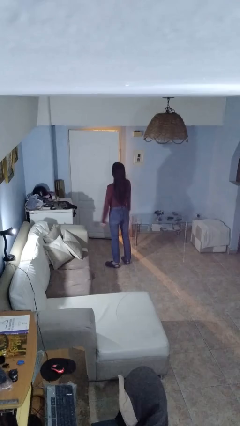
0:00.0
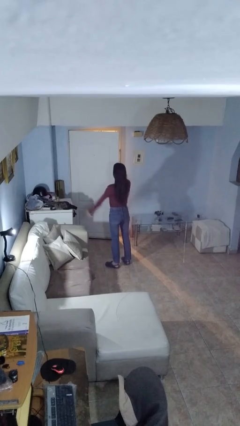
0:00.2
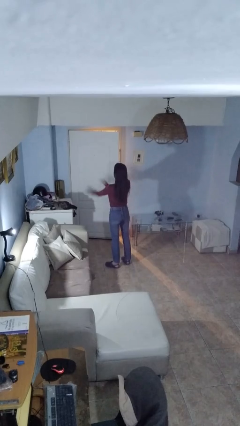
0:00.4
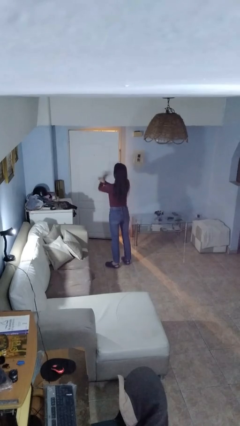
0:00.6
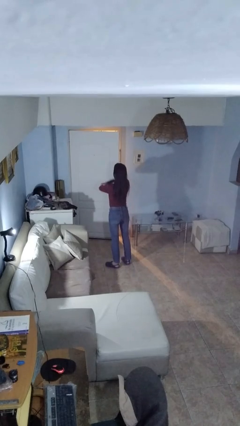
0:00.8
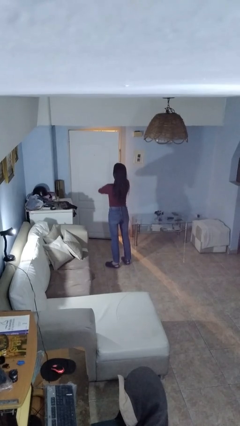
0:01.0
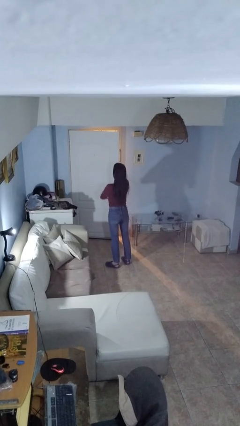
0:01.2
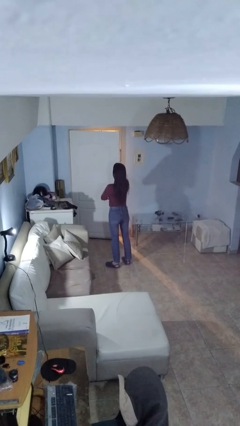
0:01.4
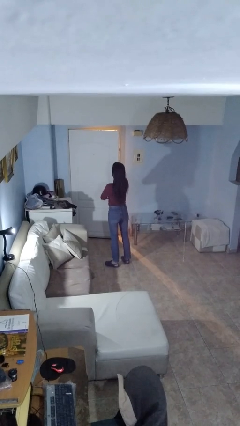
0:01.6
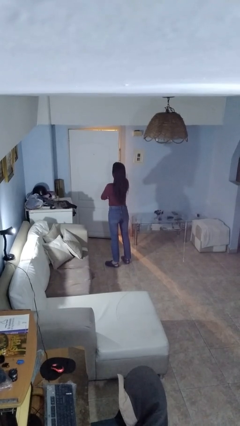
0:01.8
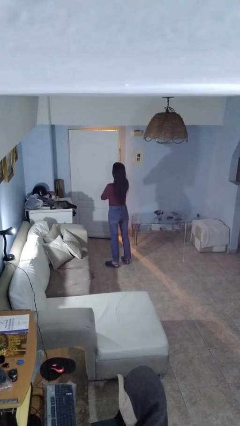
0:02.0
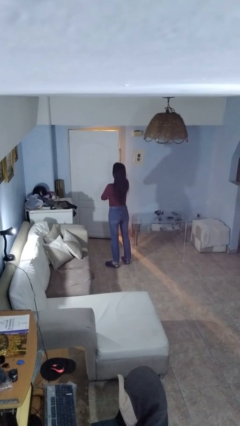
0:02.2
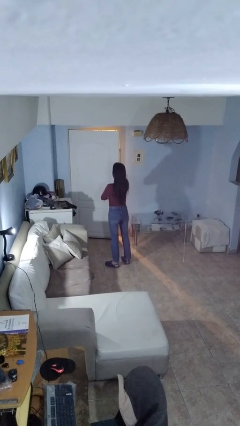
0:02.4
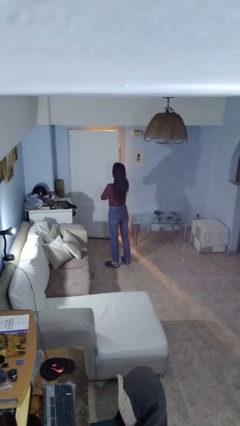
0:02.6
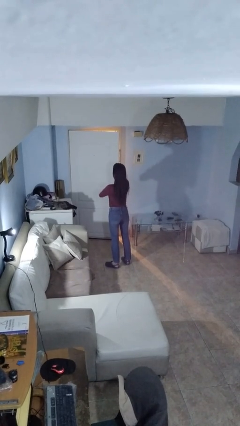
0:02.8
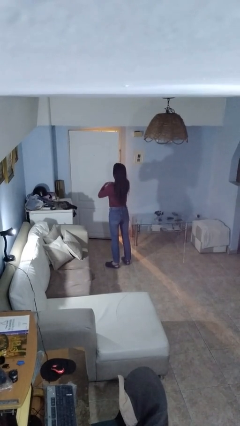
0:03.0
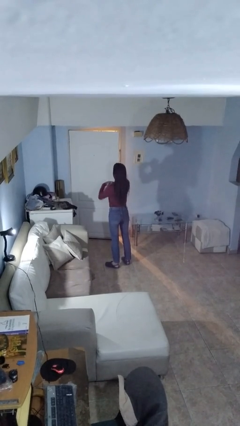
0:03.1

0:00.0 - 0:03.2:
person crosses arms

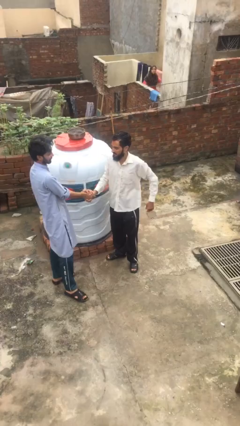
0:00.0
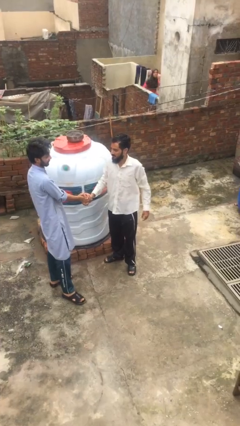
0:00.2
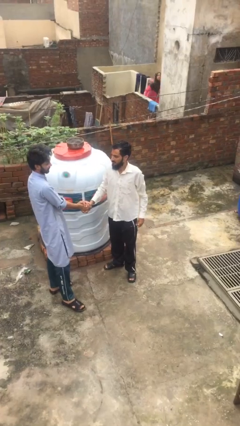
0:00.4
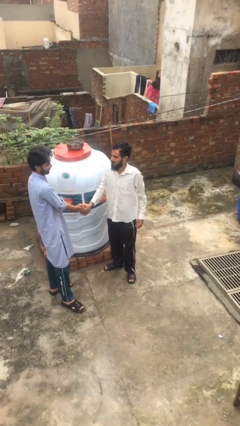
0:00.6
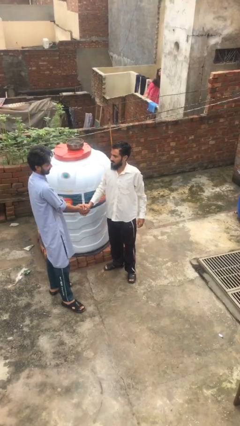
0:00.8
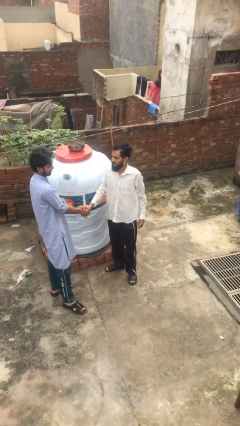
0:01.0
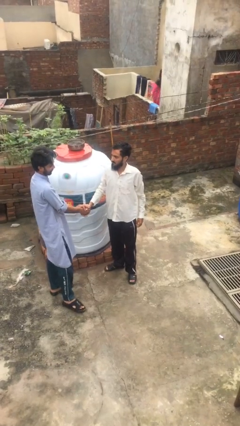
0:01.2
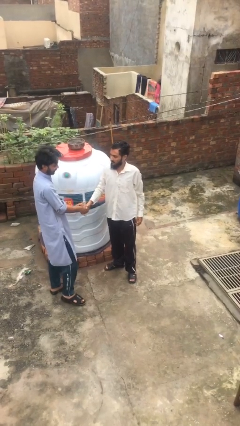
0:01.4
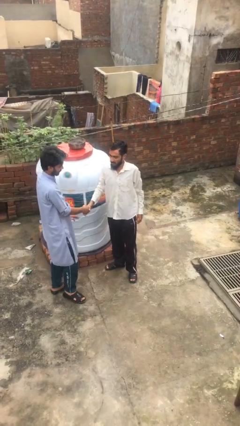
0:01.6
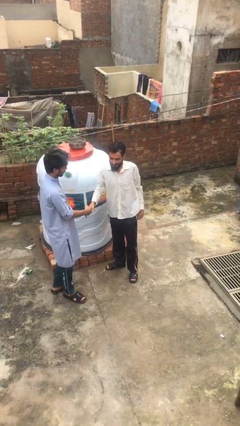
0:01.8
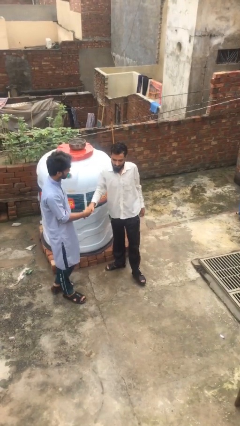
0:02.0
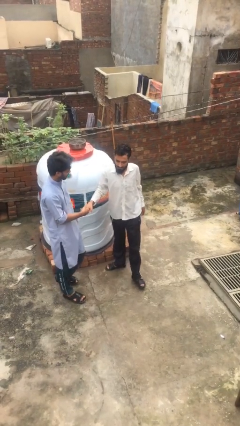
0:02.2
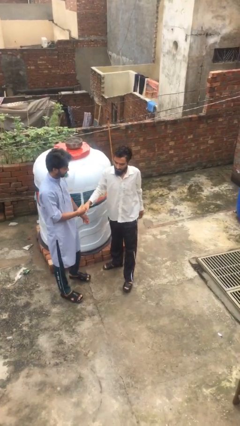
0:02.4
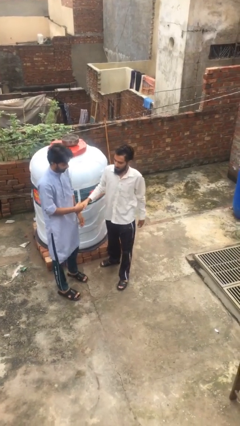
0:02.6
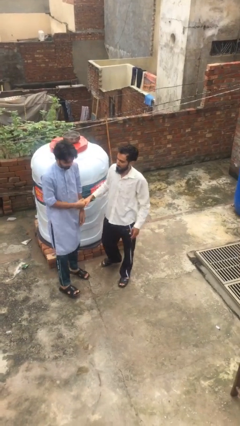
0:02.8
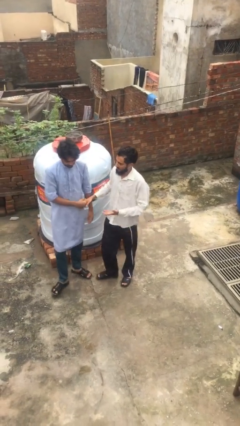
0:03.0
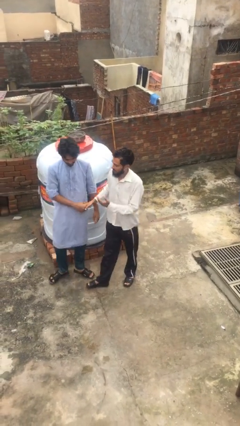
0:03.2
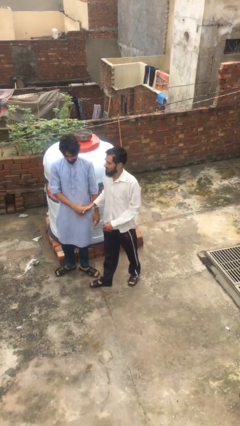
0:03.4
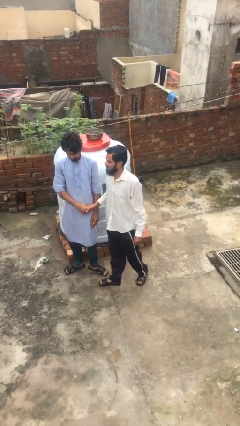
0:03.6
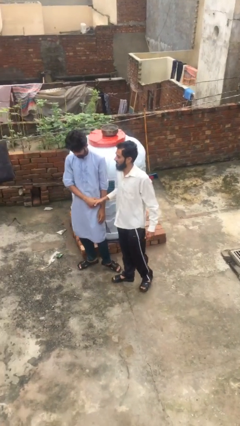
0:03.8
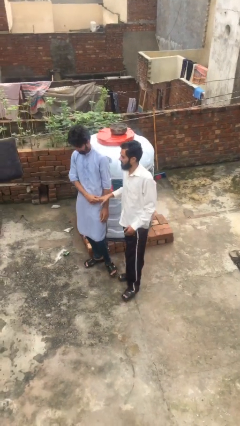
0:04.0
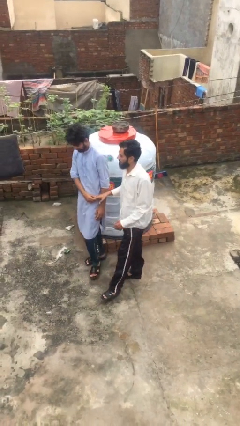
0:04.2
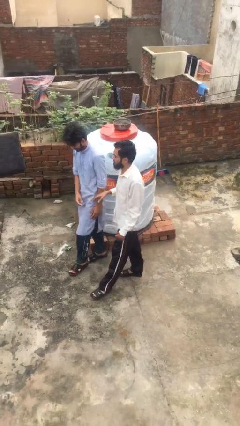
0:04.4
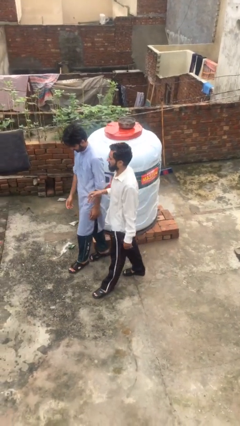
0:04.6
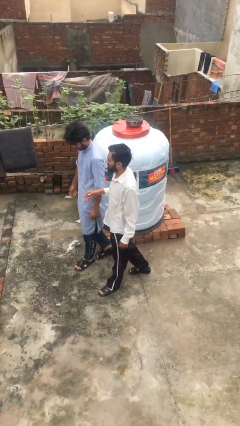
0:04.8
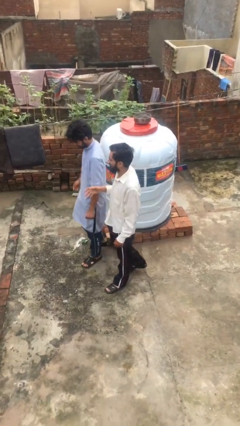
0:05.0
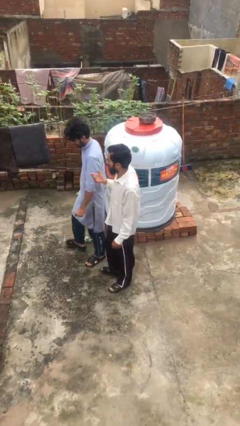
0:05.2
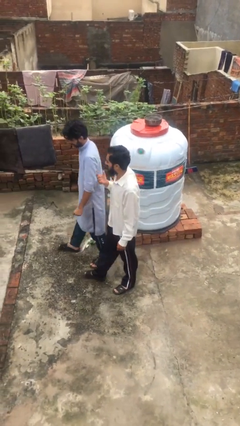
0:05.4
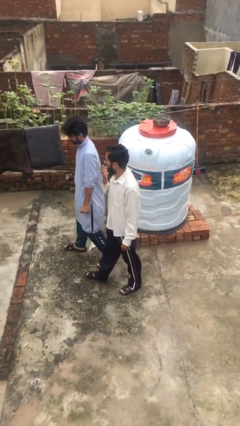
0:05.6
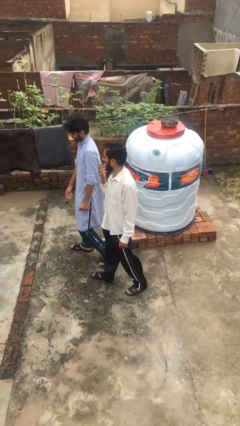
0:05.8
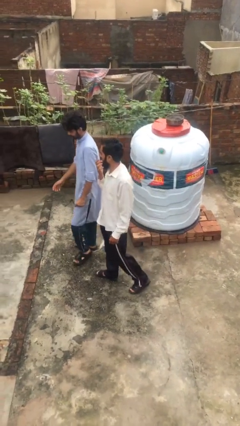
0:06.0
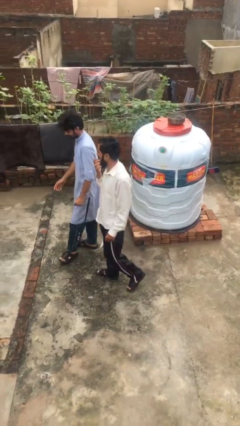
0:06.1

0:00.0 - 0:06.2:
person talks to person

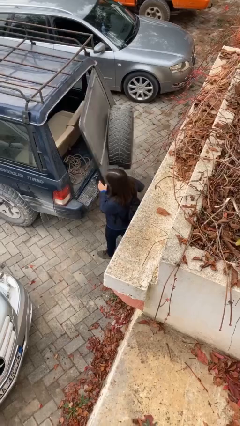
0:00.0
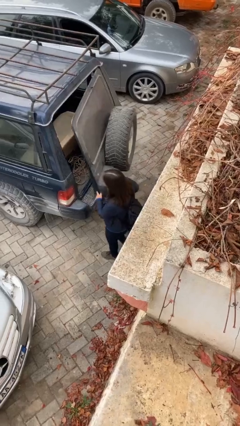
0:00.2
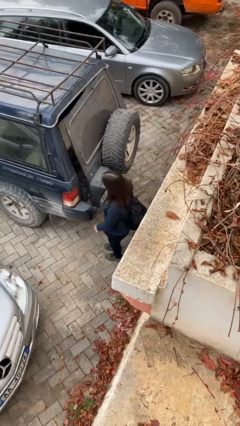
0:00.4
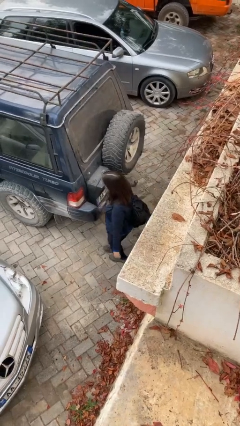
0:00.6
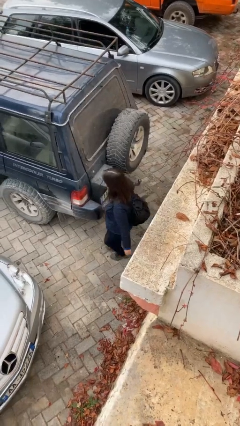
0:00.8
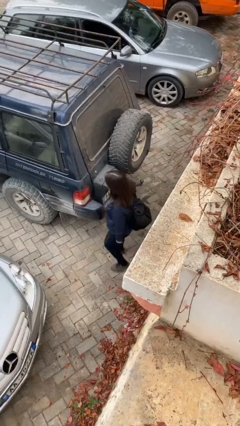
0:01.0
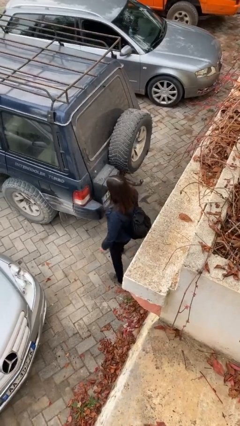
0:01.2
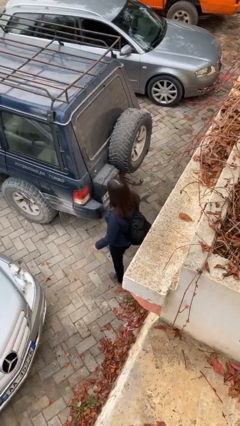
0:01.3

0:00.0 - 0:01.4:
person closes car trunk

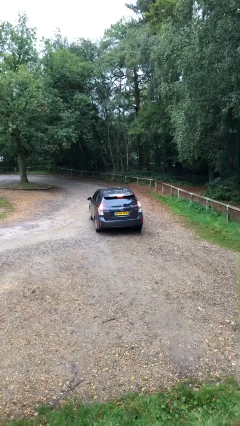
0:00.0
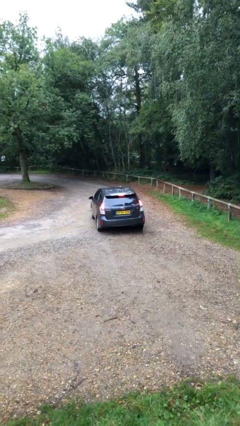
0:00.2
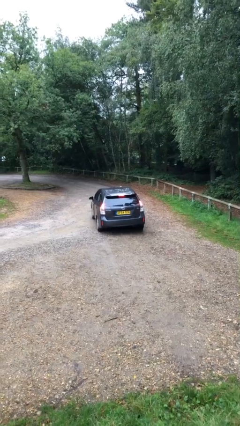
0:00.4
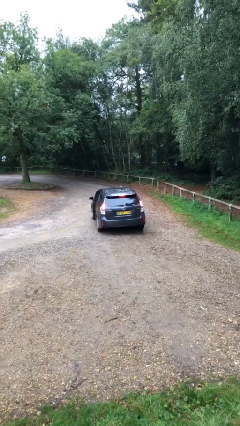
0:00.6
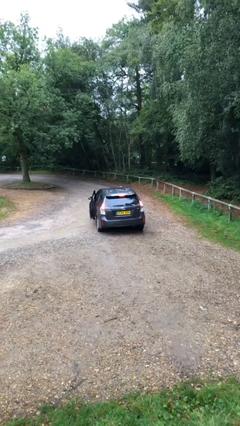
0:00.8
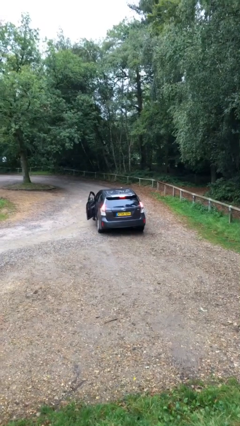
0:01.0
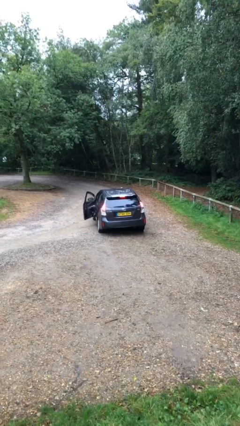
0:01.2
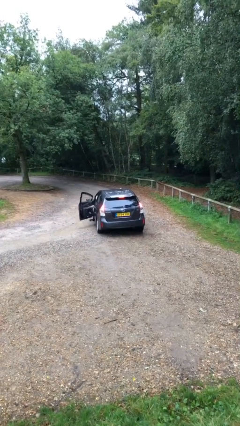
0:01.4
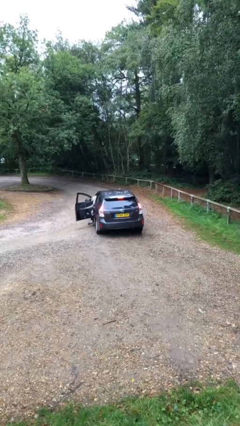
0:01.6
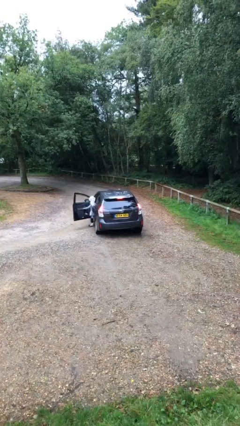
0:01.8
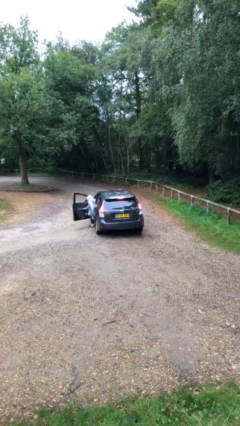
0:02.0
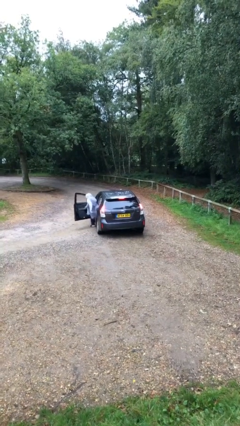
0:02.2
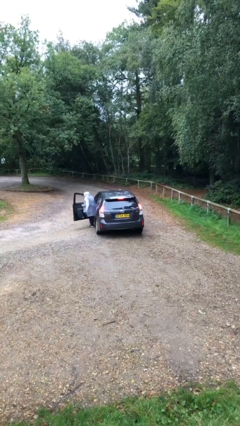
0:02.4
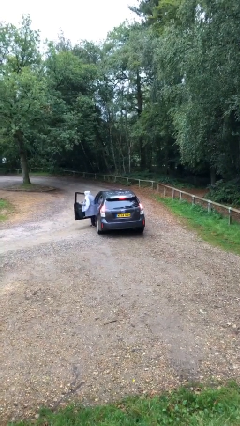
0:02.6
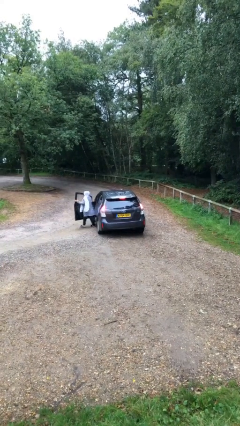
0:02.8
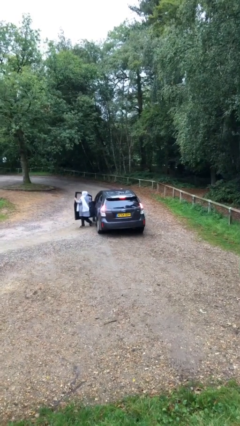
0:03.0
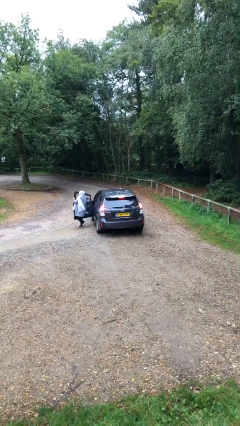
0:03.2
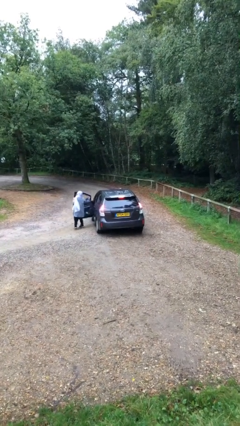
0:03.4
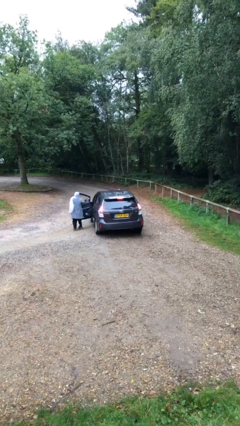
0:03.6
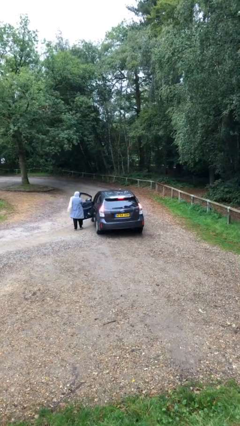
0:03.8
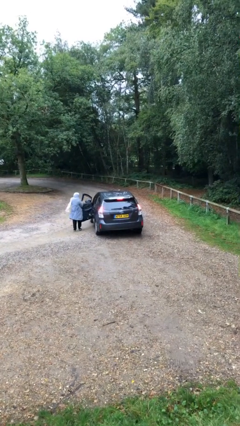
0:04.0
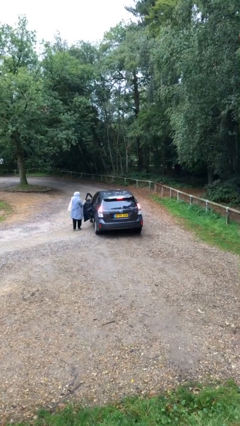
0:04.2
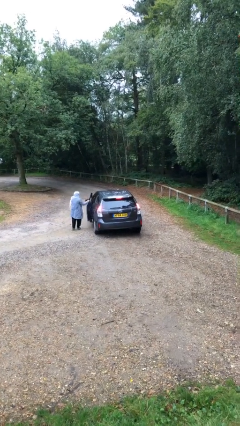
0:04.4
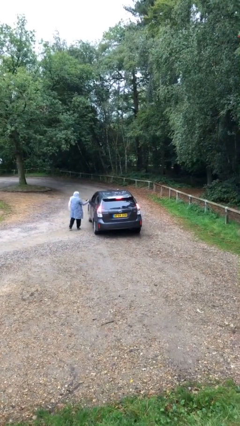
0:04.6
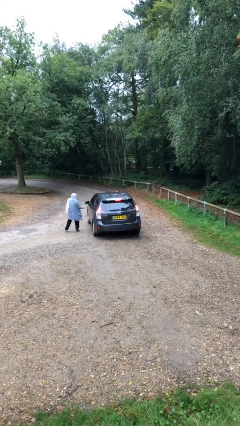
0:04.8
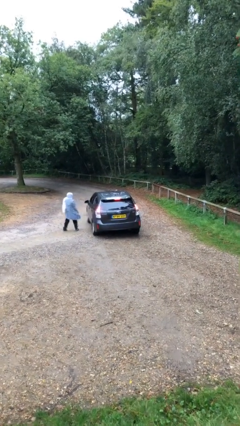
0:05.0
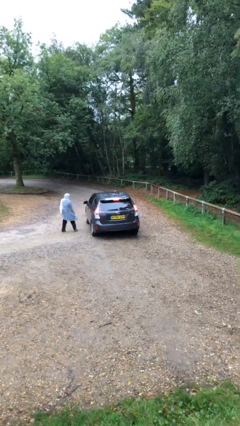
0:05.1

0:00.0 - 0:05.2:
car drops off person

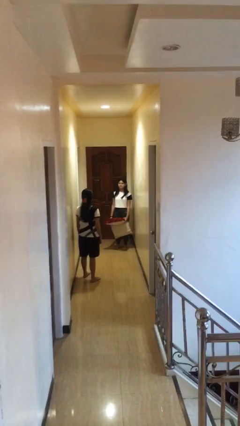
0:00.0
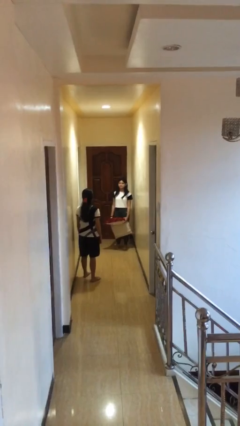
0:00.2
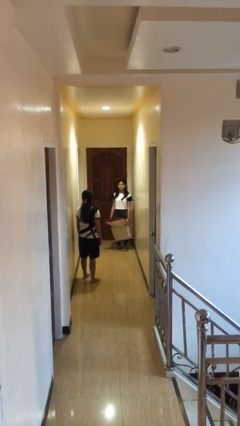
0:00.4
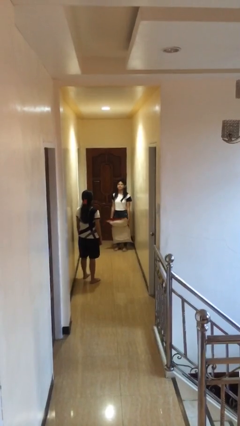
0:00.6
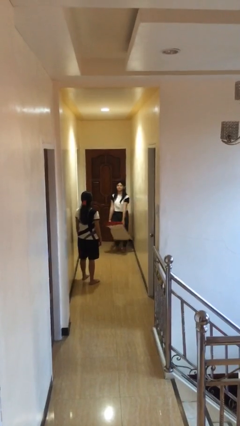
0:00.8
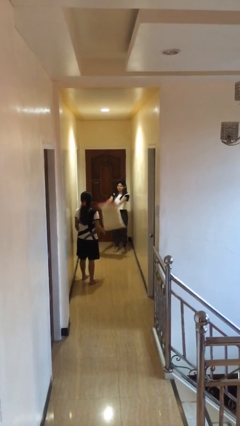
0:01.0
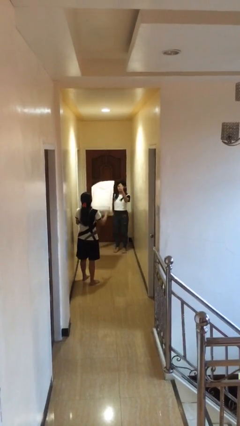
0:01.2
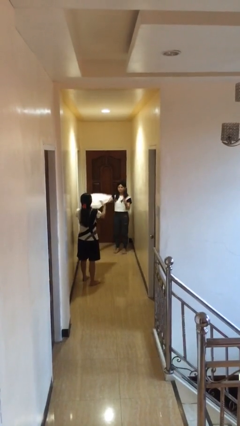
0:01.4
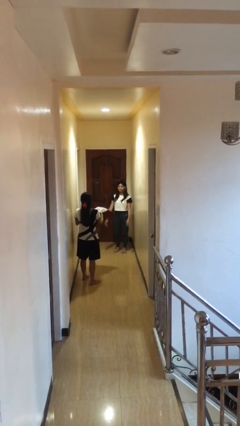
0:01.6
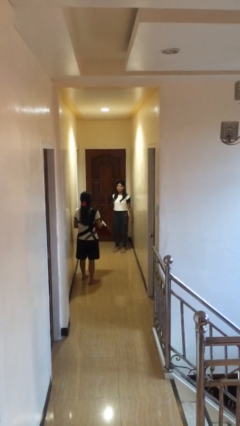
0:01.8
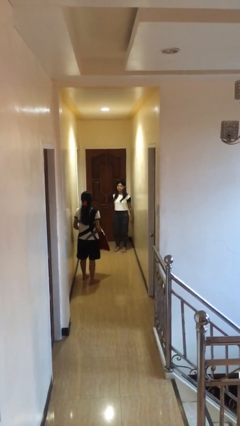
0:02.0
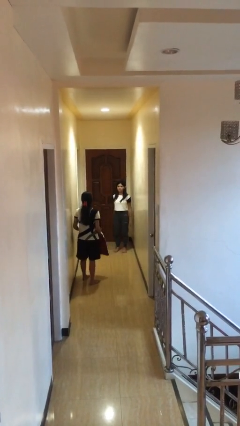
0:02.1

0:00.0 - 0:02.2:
person throws object to person
